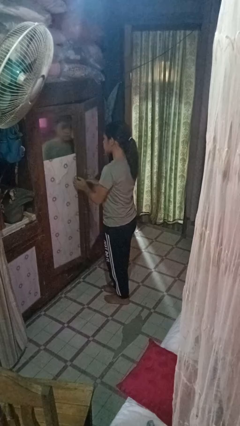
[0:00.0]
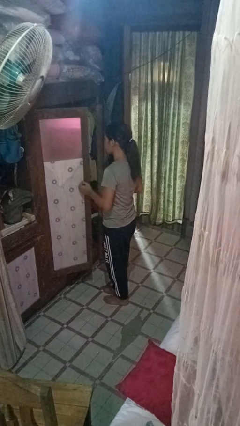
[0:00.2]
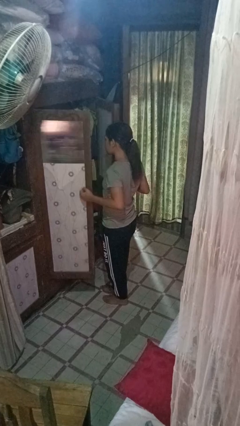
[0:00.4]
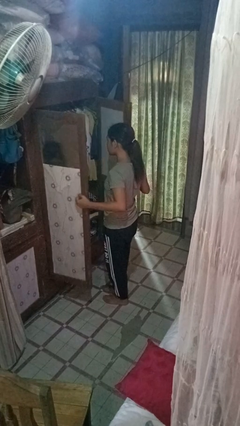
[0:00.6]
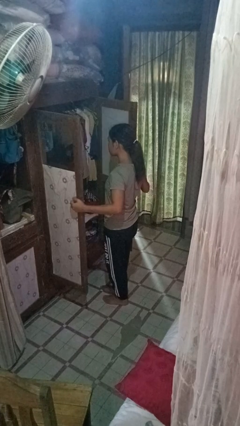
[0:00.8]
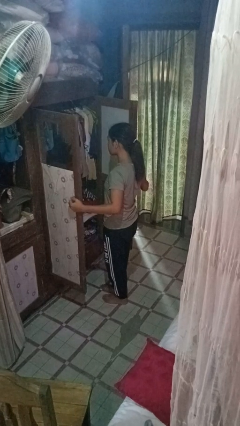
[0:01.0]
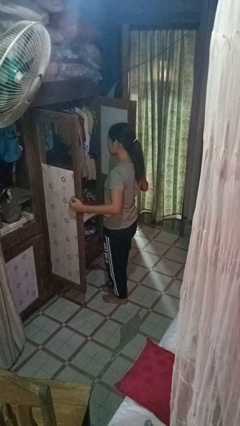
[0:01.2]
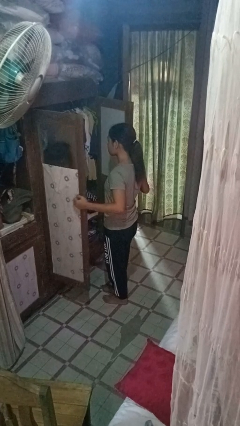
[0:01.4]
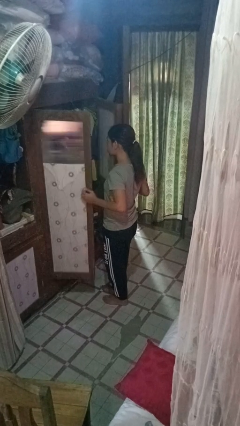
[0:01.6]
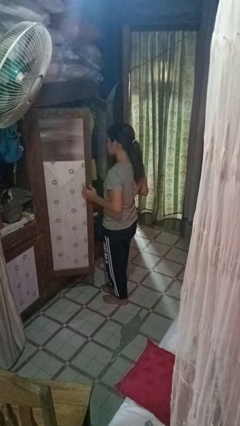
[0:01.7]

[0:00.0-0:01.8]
person opens closet door

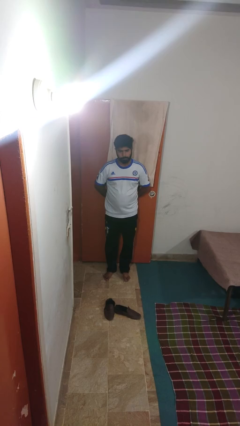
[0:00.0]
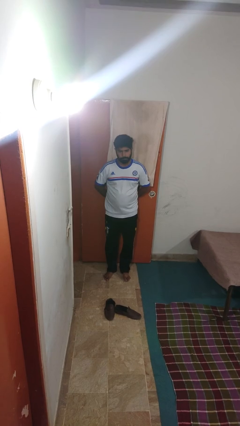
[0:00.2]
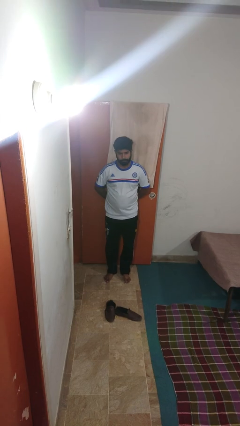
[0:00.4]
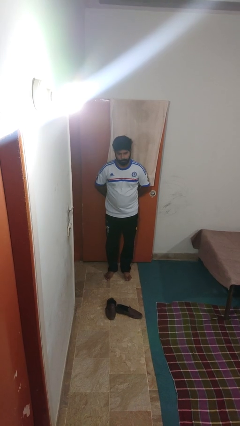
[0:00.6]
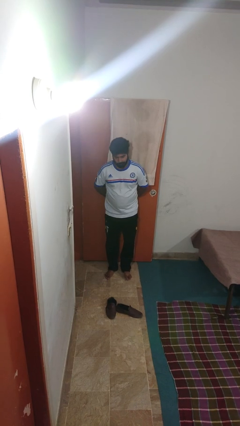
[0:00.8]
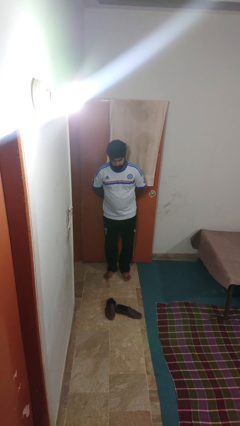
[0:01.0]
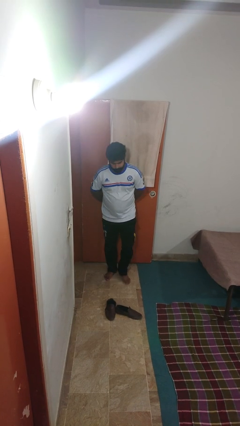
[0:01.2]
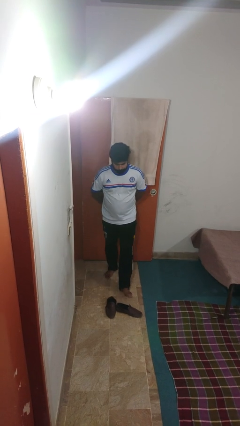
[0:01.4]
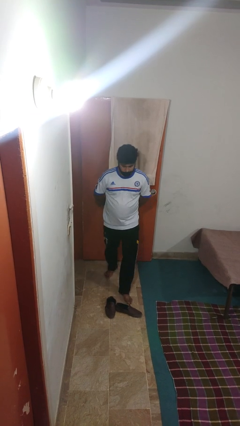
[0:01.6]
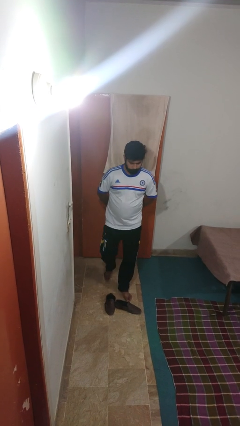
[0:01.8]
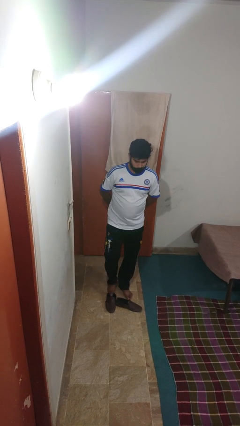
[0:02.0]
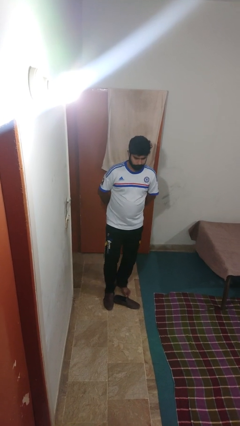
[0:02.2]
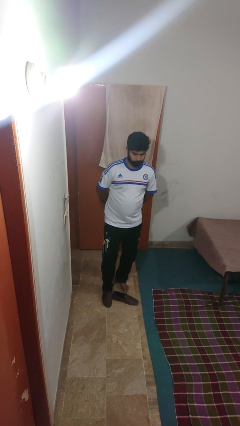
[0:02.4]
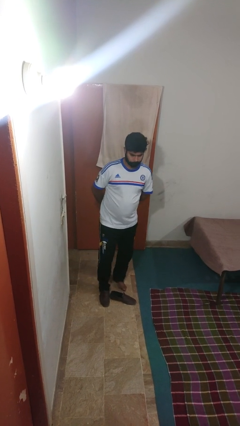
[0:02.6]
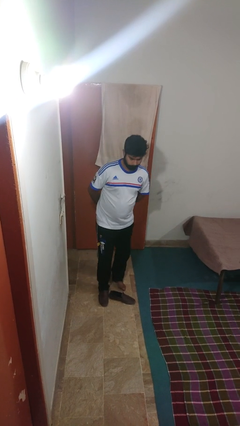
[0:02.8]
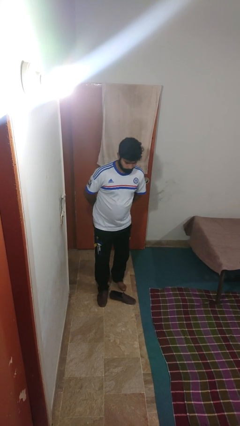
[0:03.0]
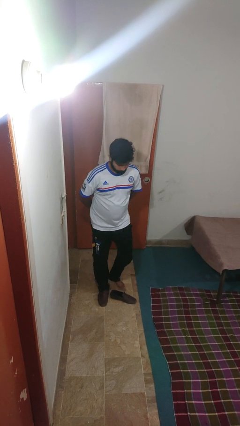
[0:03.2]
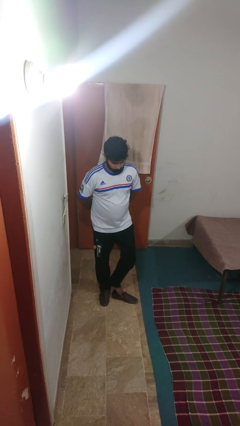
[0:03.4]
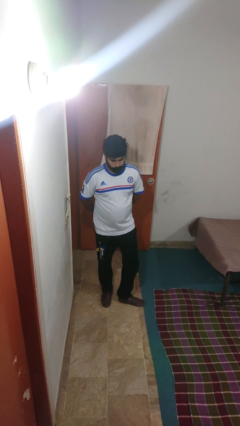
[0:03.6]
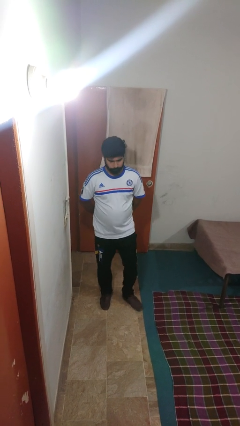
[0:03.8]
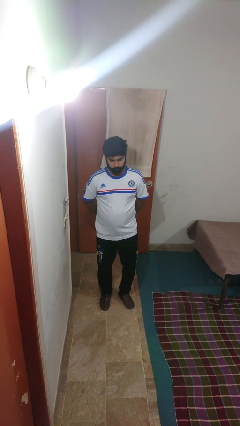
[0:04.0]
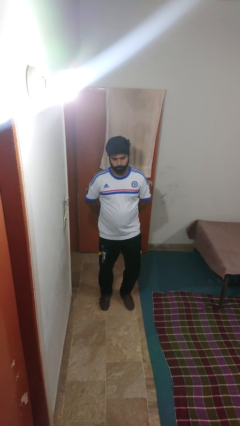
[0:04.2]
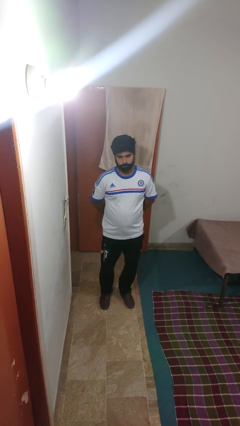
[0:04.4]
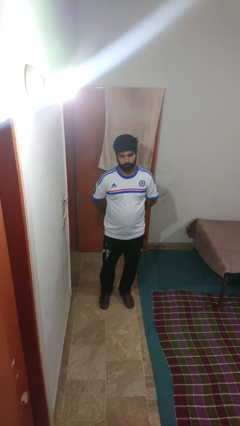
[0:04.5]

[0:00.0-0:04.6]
person puts on shoes

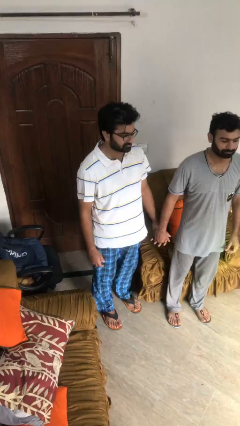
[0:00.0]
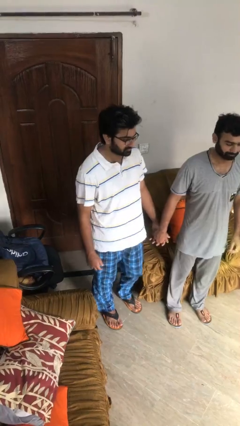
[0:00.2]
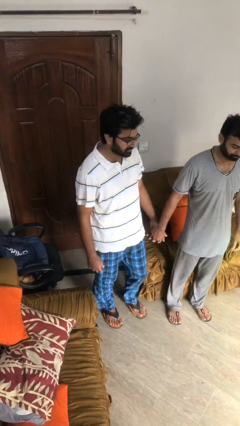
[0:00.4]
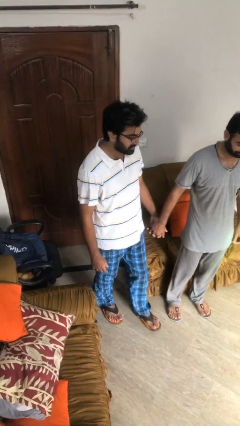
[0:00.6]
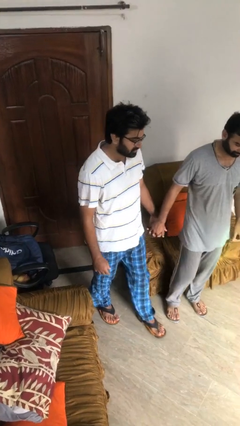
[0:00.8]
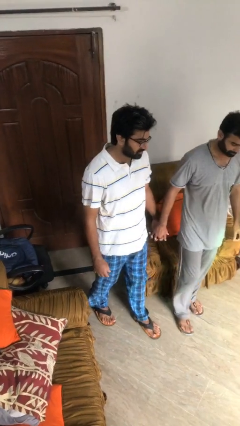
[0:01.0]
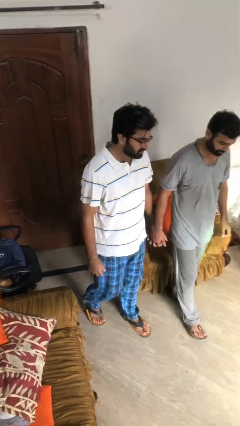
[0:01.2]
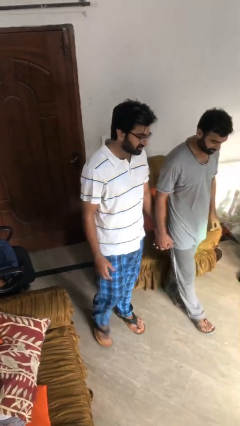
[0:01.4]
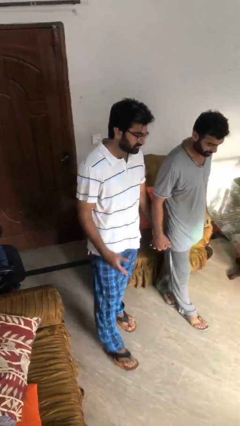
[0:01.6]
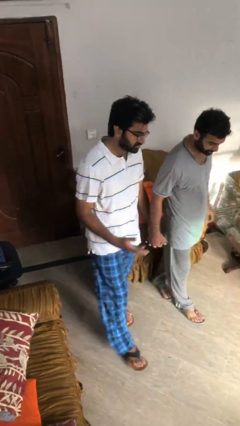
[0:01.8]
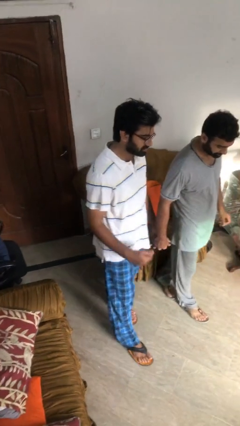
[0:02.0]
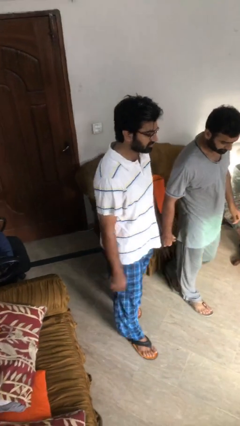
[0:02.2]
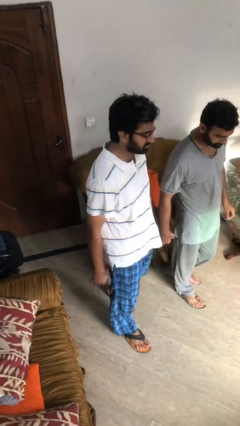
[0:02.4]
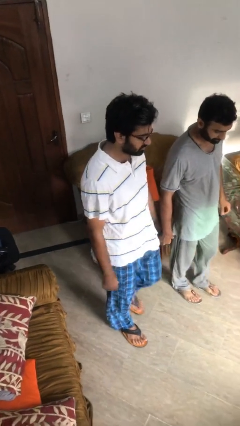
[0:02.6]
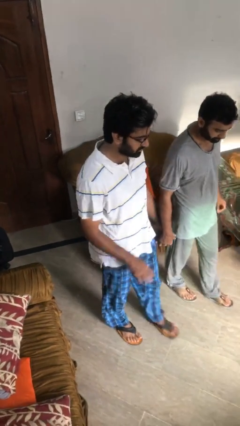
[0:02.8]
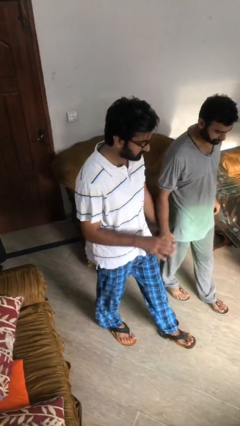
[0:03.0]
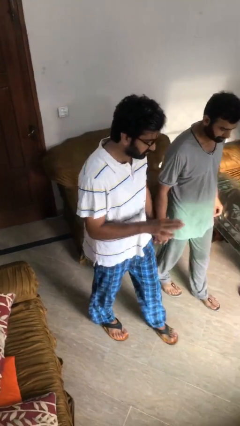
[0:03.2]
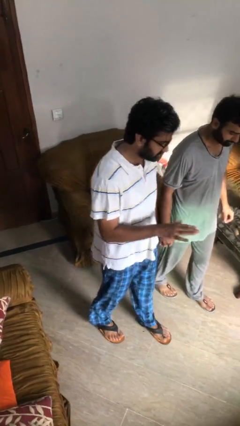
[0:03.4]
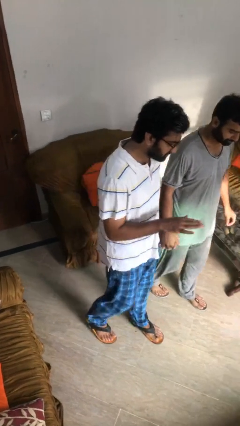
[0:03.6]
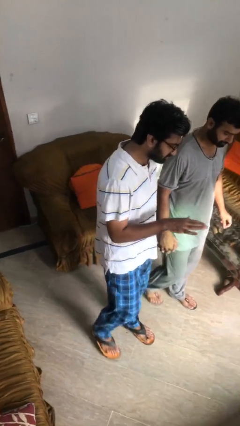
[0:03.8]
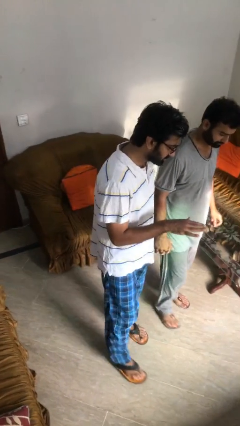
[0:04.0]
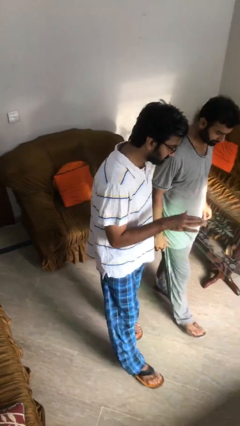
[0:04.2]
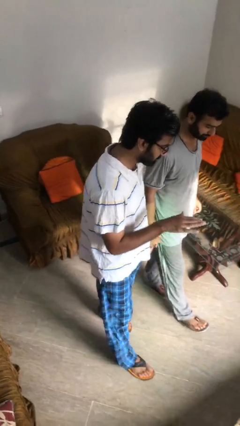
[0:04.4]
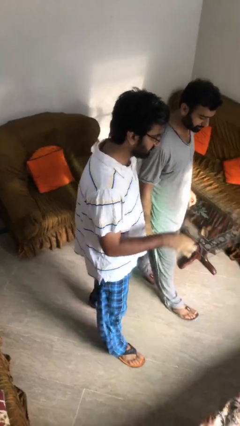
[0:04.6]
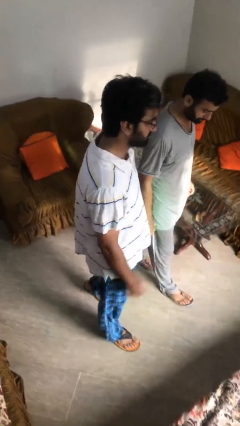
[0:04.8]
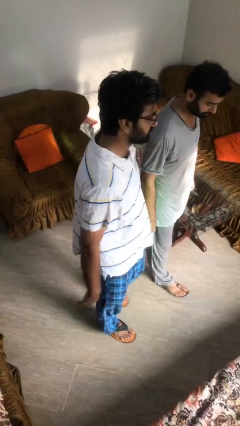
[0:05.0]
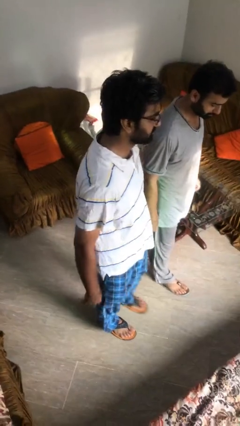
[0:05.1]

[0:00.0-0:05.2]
person holds hand

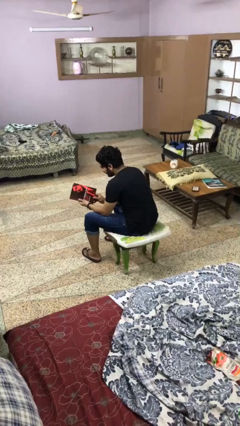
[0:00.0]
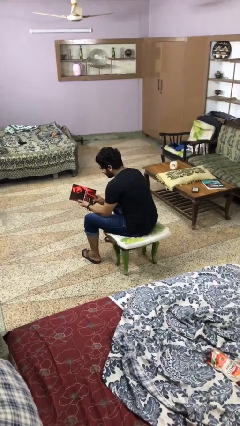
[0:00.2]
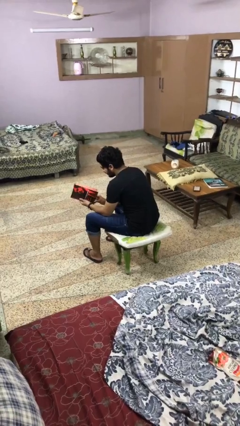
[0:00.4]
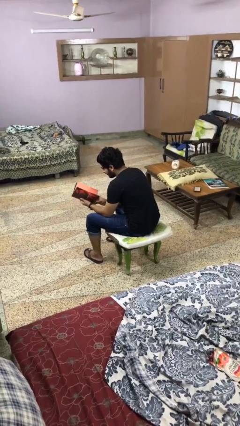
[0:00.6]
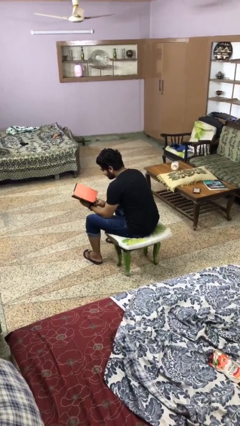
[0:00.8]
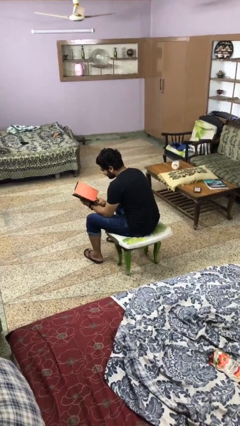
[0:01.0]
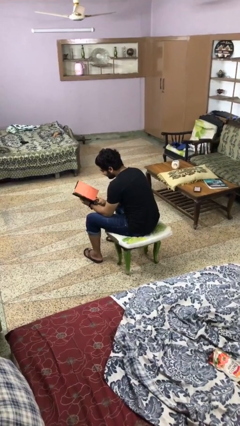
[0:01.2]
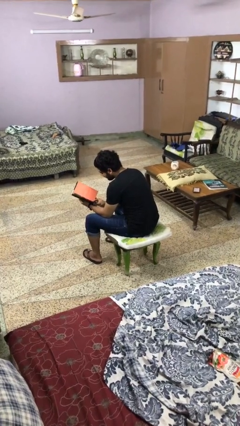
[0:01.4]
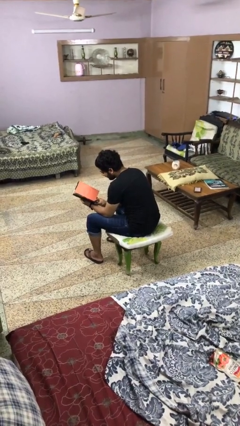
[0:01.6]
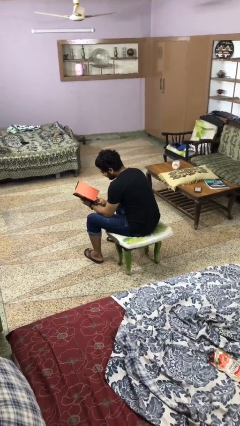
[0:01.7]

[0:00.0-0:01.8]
person reads magazine

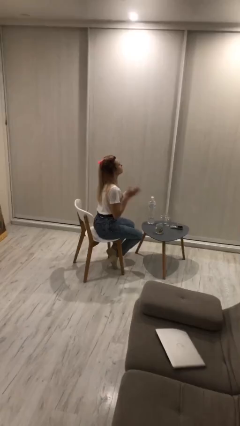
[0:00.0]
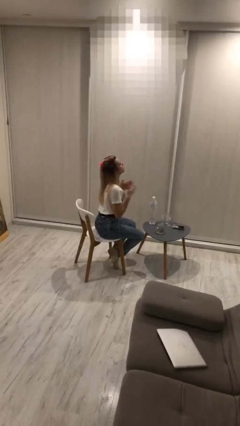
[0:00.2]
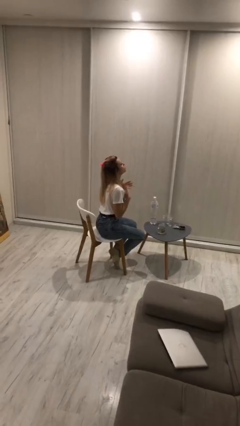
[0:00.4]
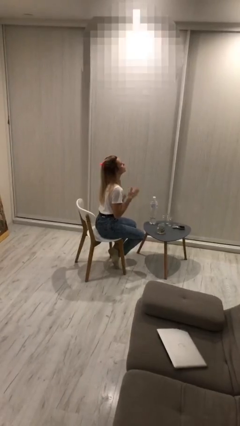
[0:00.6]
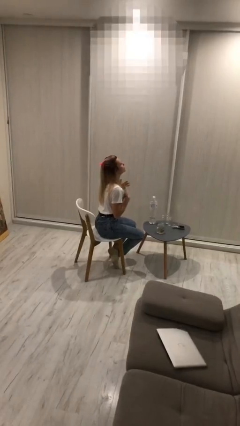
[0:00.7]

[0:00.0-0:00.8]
person drums on chest

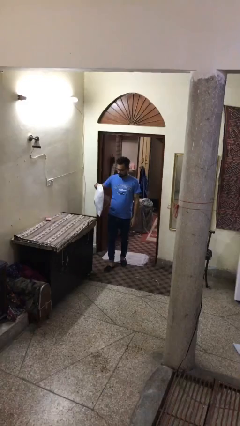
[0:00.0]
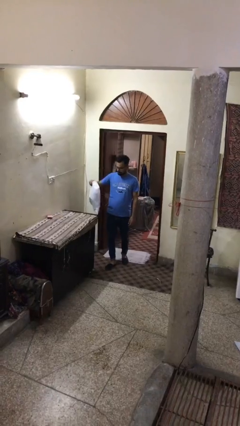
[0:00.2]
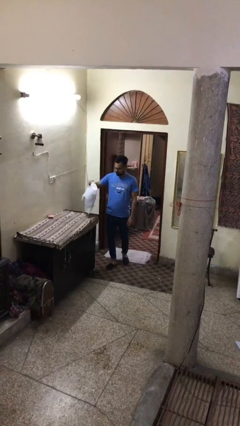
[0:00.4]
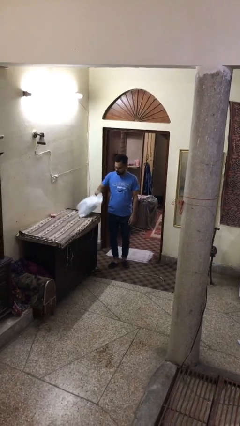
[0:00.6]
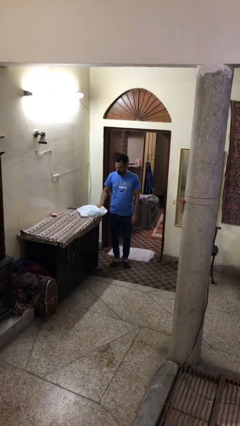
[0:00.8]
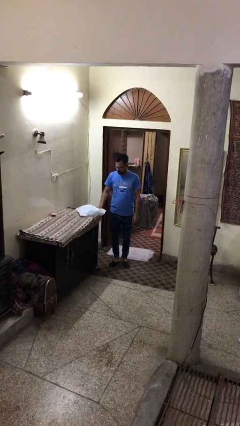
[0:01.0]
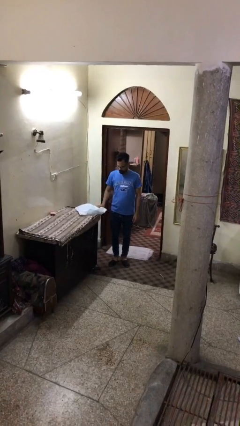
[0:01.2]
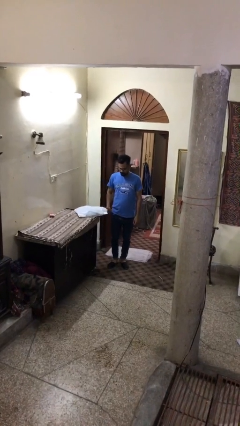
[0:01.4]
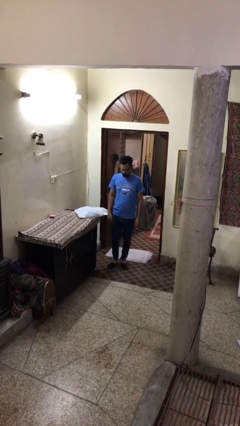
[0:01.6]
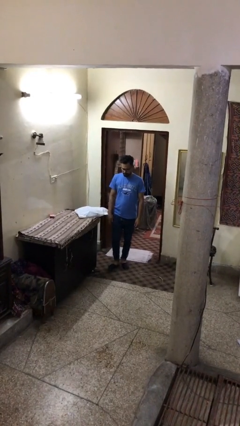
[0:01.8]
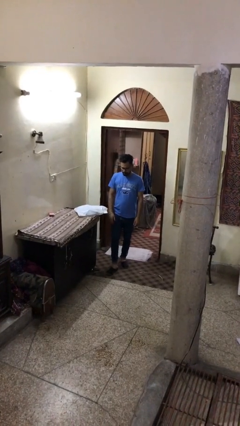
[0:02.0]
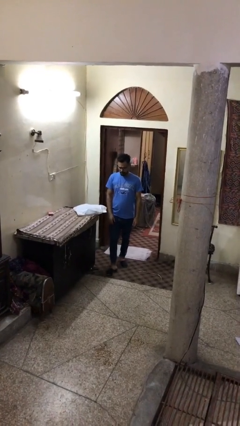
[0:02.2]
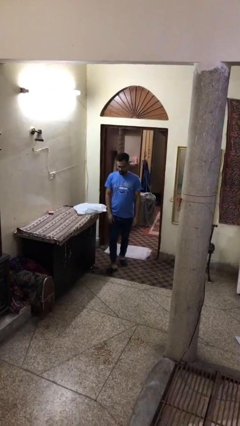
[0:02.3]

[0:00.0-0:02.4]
person puts down object on table

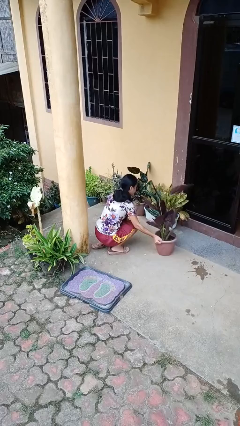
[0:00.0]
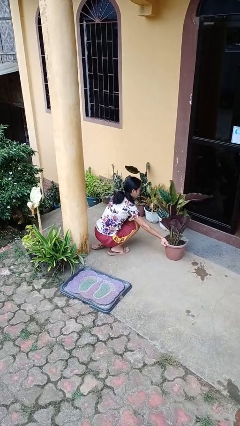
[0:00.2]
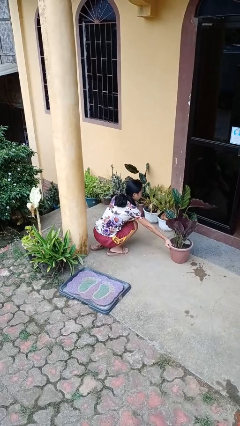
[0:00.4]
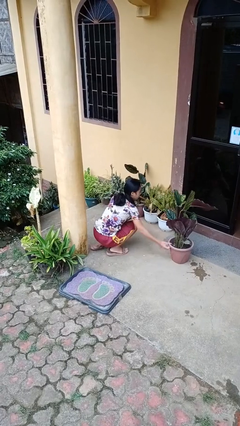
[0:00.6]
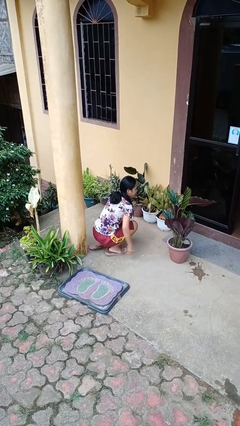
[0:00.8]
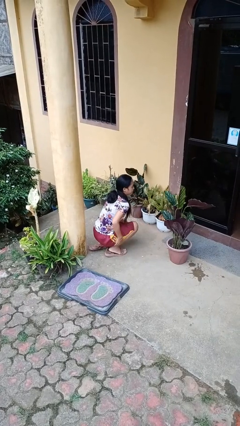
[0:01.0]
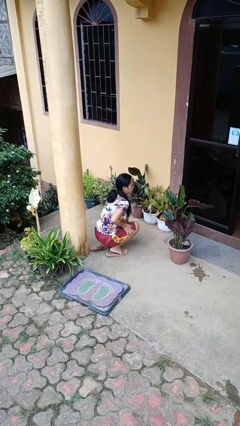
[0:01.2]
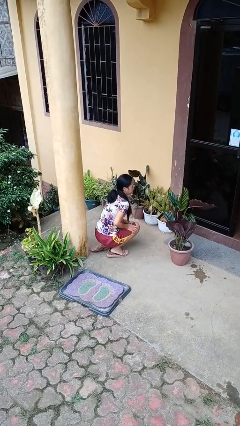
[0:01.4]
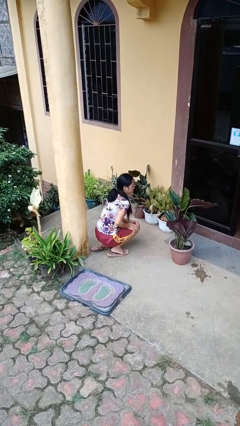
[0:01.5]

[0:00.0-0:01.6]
person arranges flowers in vase
